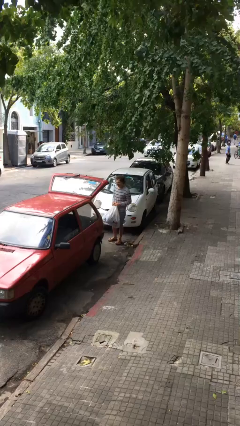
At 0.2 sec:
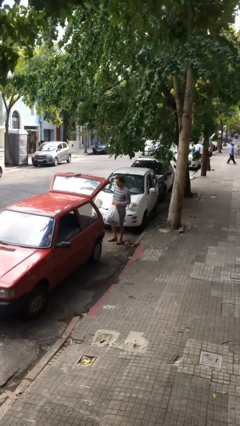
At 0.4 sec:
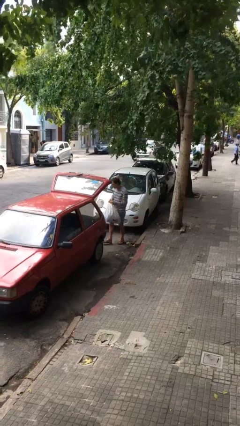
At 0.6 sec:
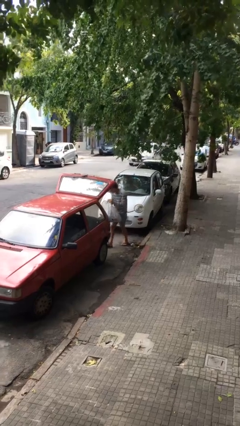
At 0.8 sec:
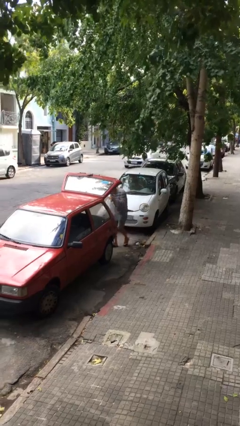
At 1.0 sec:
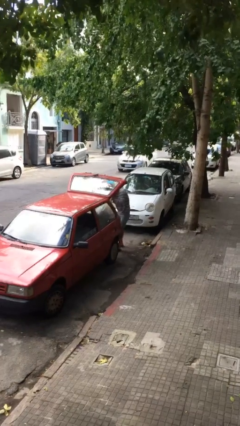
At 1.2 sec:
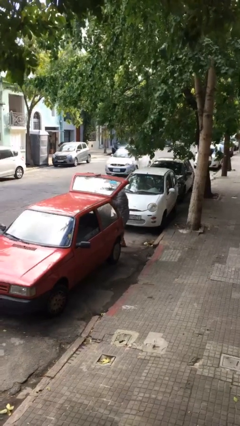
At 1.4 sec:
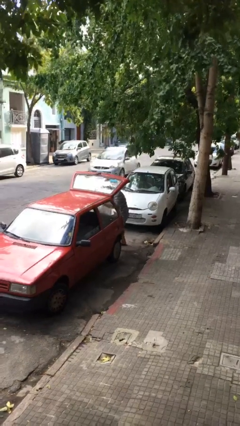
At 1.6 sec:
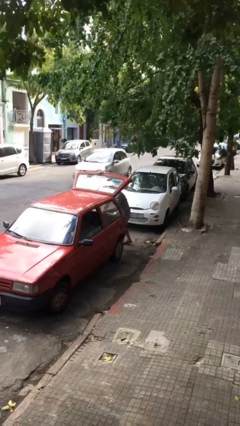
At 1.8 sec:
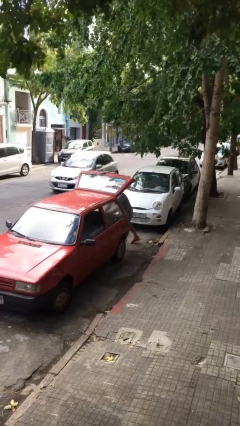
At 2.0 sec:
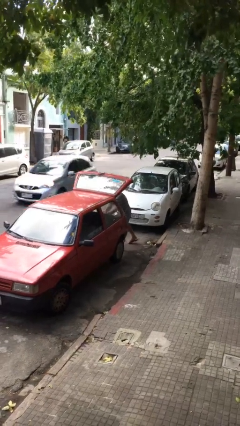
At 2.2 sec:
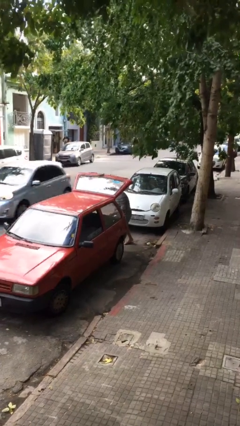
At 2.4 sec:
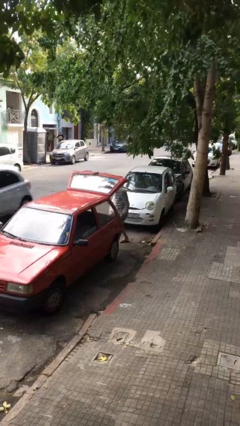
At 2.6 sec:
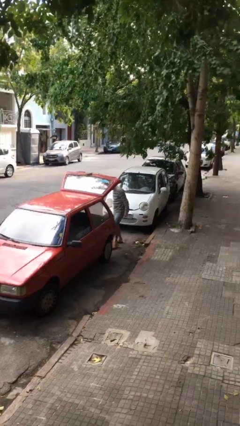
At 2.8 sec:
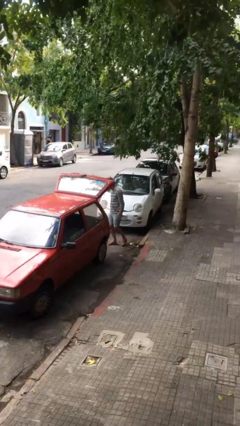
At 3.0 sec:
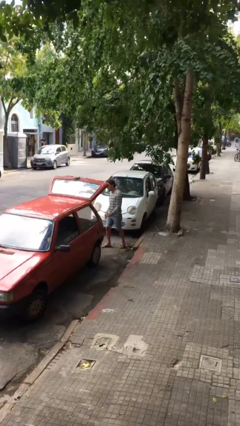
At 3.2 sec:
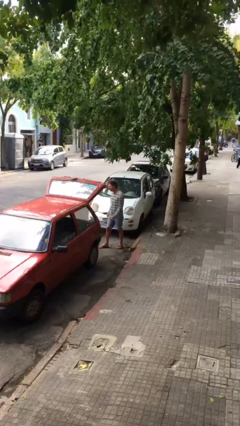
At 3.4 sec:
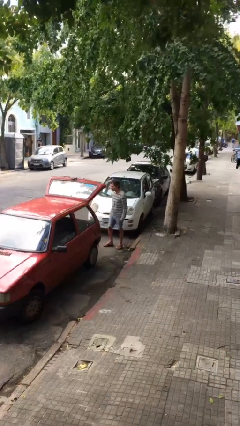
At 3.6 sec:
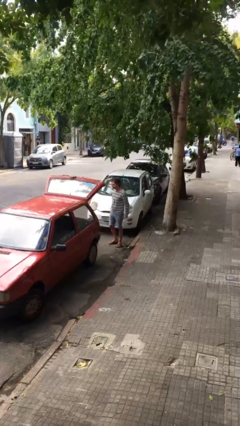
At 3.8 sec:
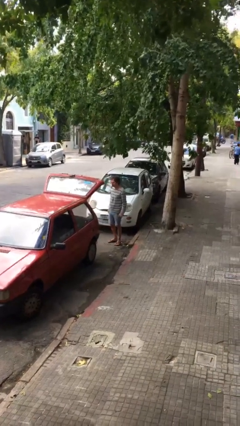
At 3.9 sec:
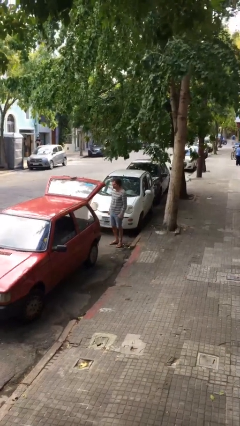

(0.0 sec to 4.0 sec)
person loads car

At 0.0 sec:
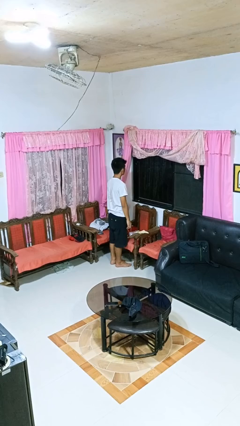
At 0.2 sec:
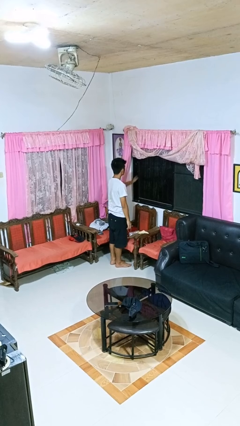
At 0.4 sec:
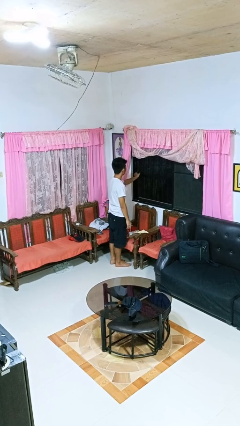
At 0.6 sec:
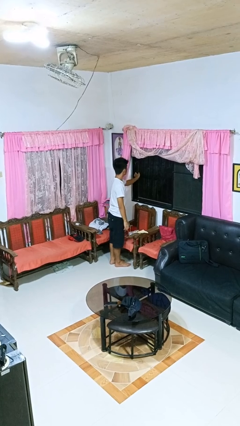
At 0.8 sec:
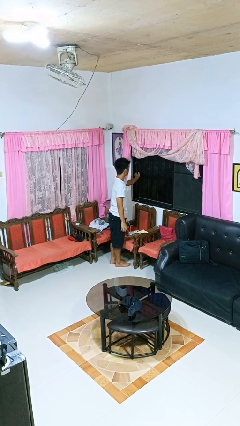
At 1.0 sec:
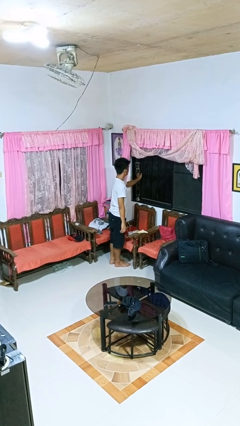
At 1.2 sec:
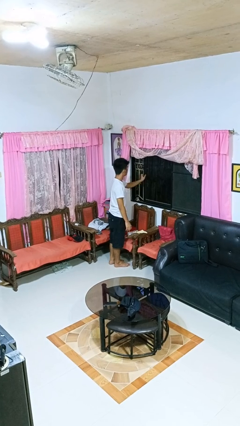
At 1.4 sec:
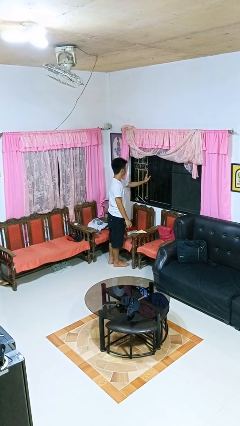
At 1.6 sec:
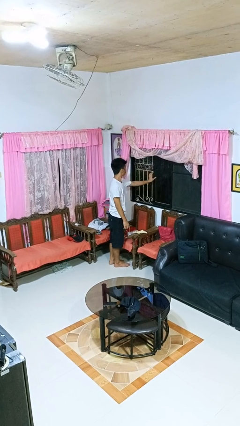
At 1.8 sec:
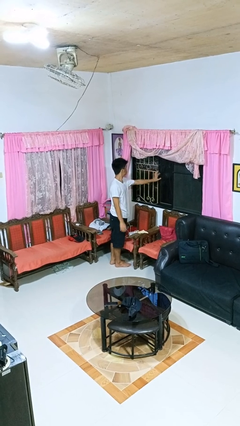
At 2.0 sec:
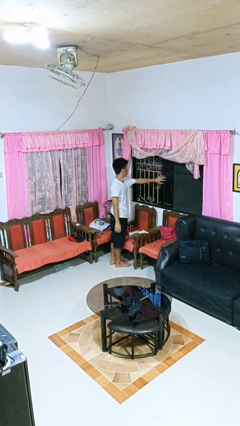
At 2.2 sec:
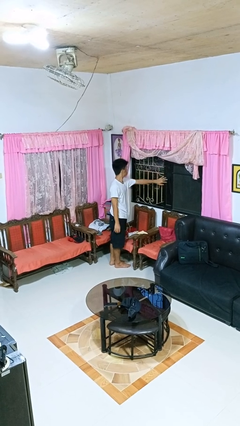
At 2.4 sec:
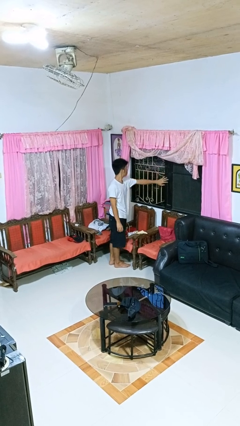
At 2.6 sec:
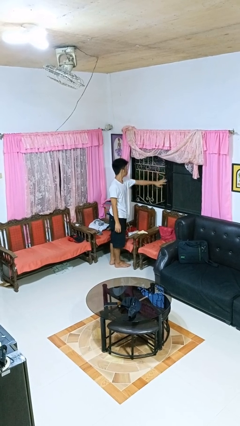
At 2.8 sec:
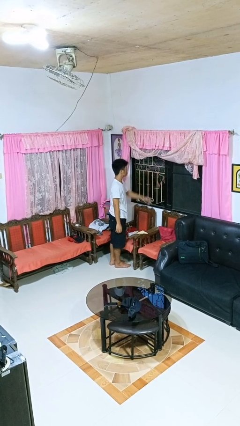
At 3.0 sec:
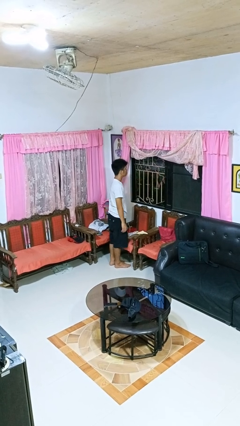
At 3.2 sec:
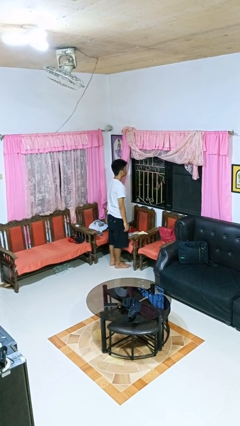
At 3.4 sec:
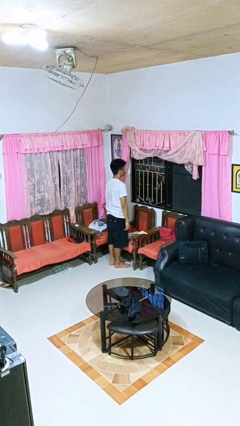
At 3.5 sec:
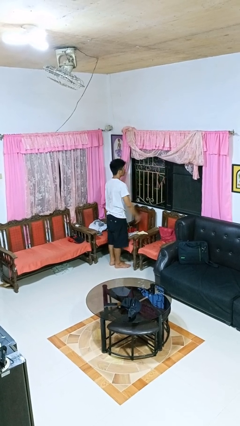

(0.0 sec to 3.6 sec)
person opens home window

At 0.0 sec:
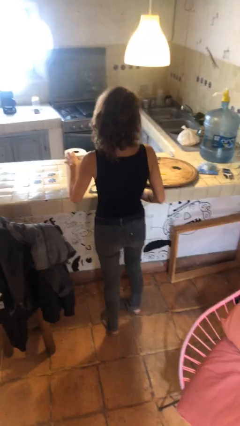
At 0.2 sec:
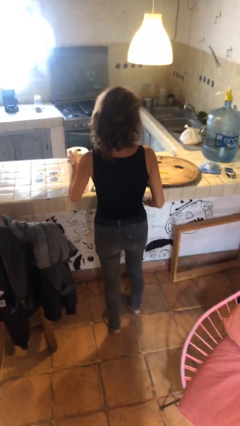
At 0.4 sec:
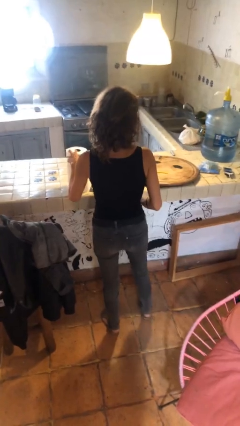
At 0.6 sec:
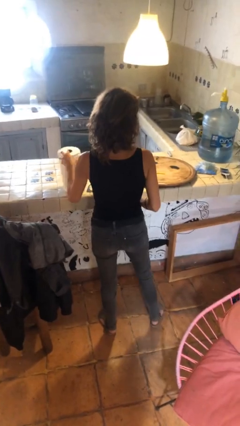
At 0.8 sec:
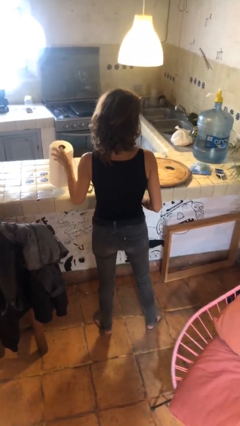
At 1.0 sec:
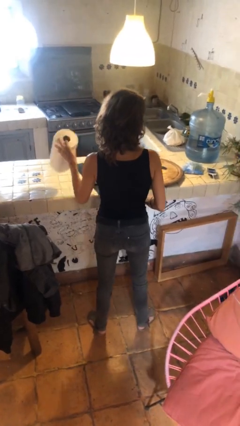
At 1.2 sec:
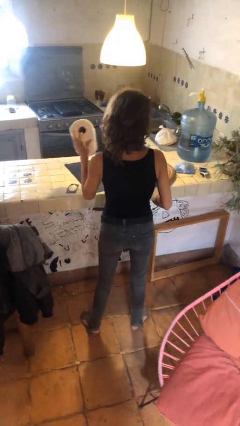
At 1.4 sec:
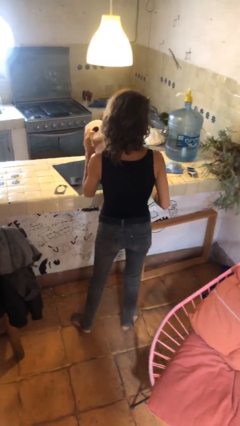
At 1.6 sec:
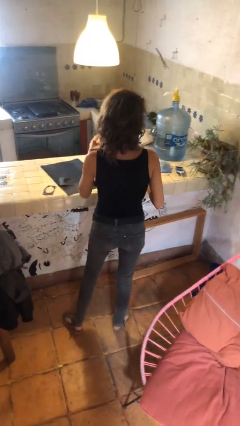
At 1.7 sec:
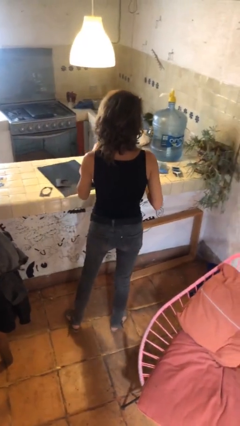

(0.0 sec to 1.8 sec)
person picks up object from countertop

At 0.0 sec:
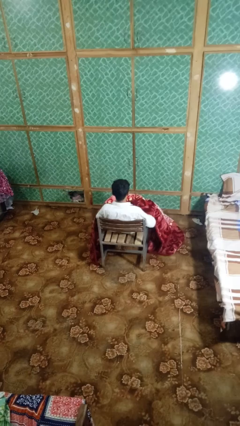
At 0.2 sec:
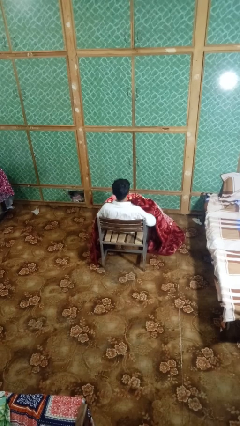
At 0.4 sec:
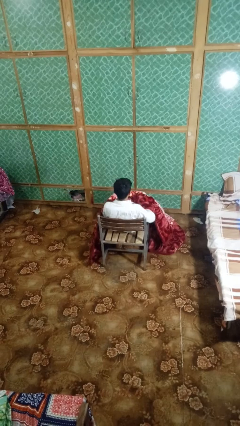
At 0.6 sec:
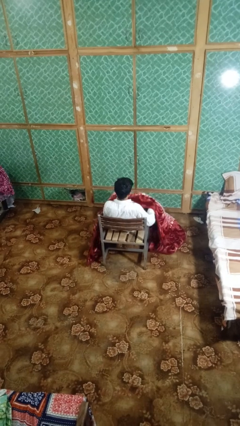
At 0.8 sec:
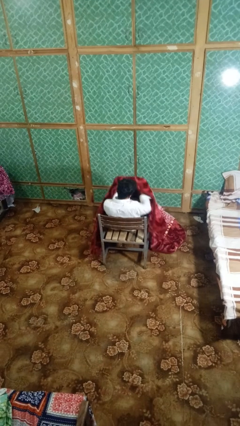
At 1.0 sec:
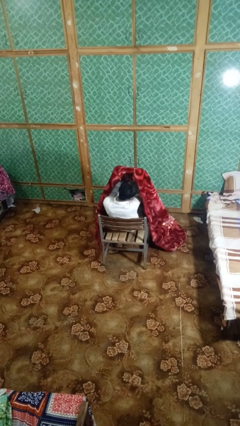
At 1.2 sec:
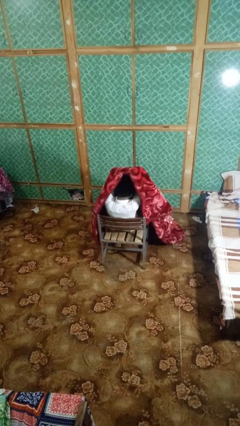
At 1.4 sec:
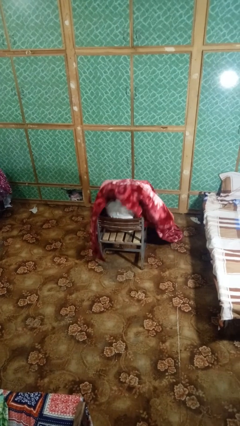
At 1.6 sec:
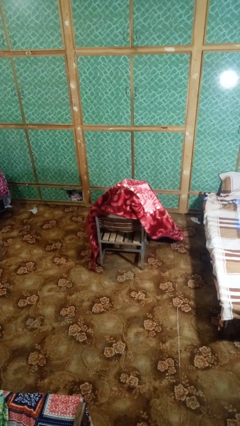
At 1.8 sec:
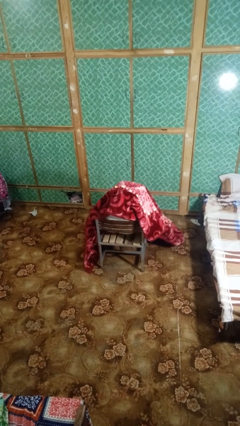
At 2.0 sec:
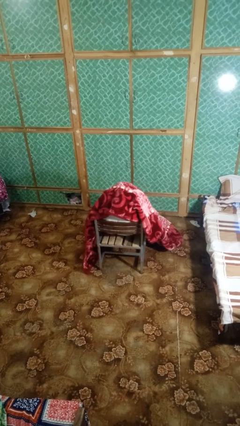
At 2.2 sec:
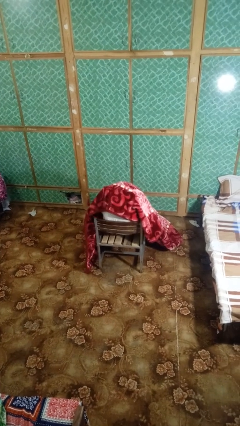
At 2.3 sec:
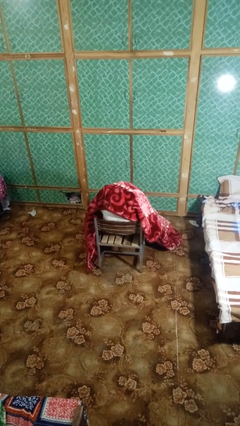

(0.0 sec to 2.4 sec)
person covers with blanket

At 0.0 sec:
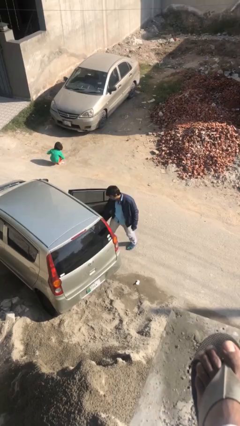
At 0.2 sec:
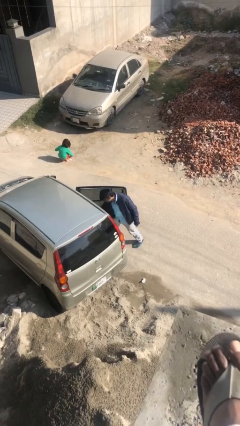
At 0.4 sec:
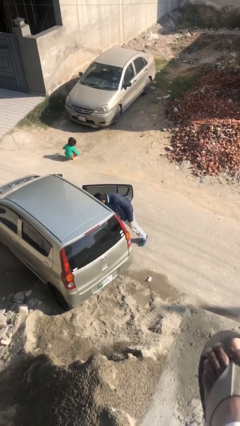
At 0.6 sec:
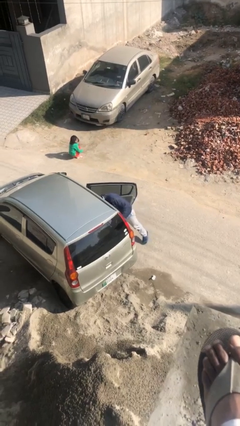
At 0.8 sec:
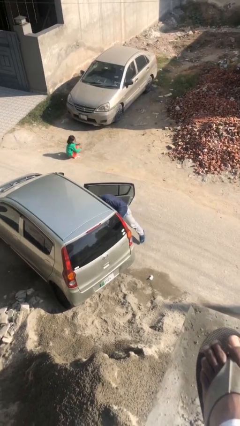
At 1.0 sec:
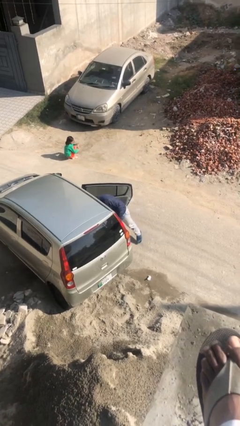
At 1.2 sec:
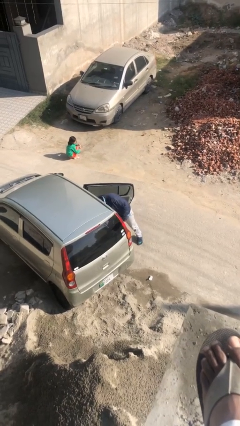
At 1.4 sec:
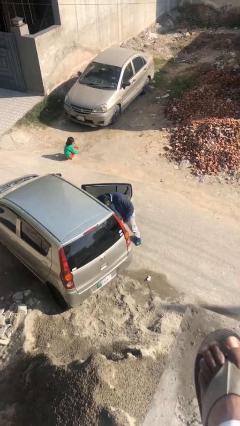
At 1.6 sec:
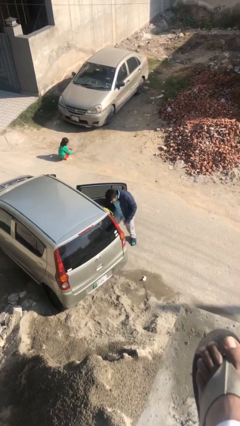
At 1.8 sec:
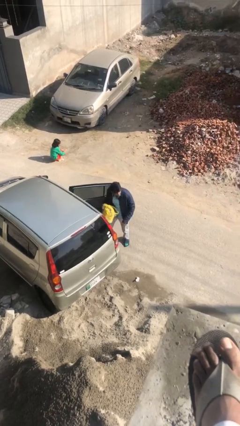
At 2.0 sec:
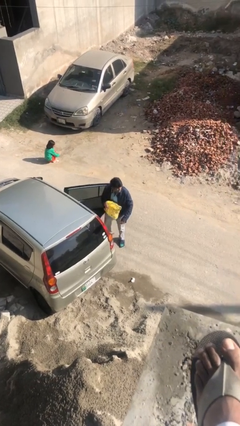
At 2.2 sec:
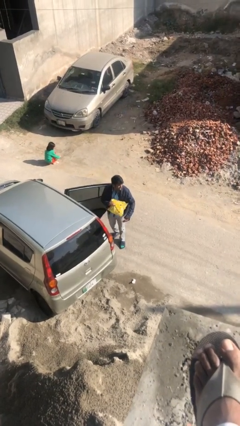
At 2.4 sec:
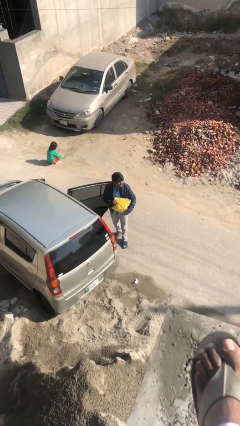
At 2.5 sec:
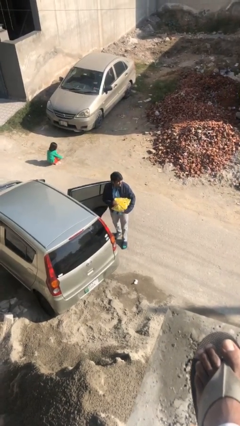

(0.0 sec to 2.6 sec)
person unloads car

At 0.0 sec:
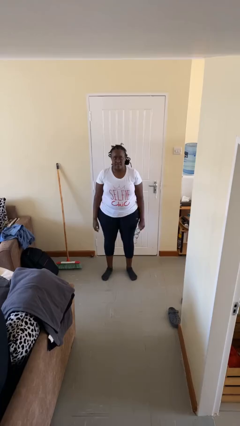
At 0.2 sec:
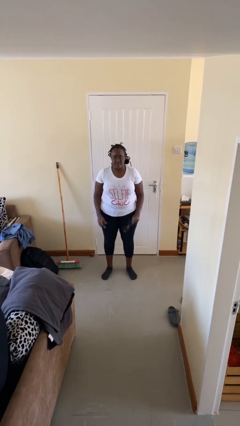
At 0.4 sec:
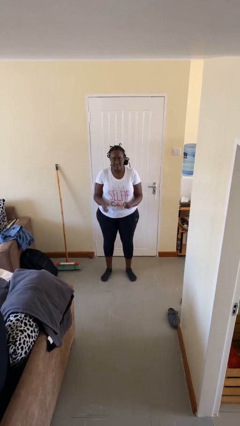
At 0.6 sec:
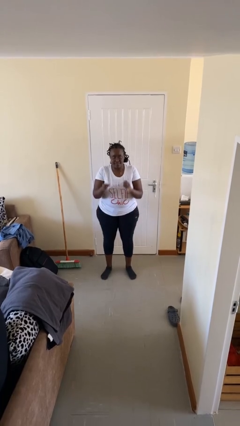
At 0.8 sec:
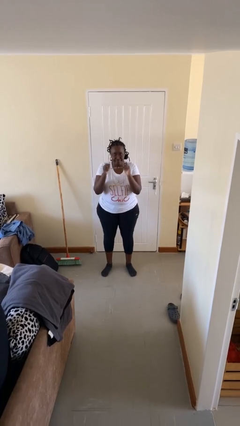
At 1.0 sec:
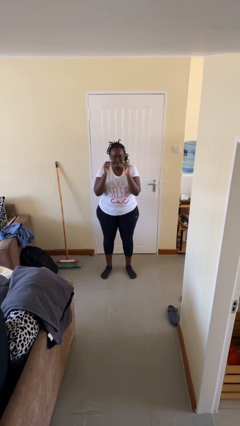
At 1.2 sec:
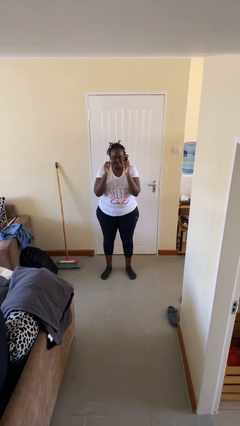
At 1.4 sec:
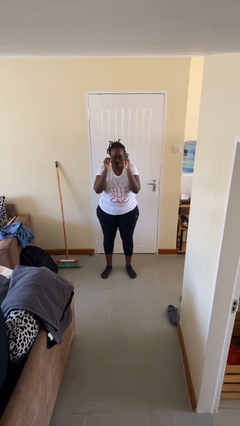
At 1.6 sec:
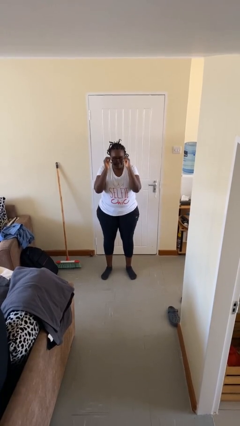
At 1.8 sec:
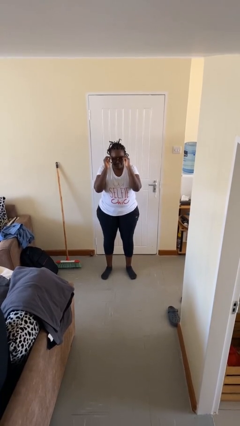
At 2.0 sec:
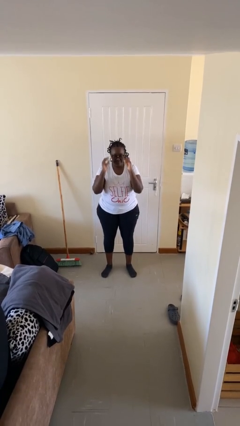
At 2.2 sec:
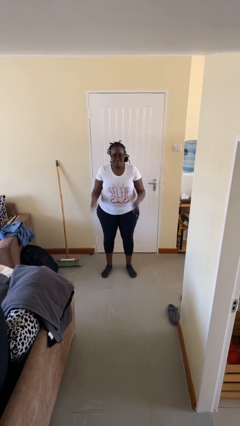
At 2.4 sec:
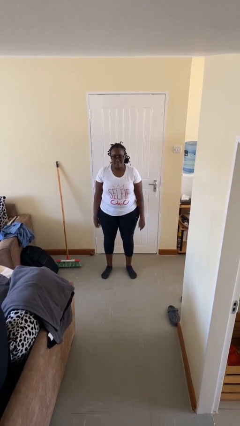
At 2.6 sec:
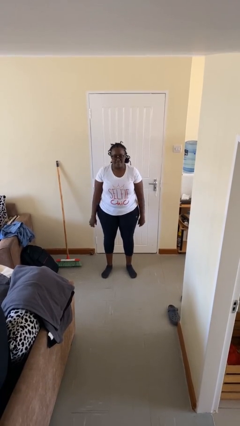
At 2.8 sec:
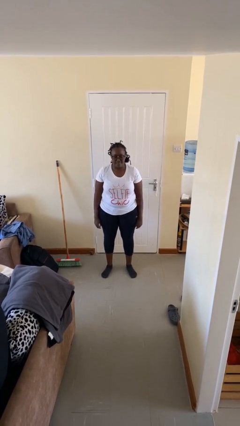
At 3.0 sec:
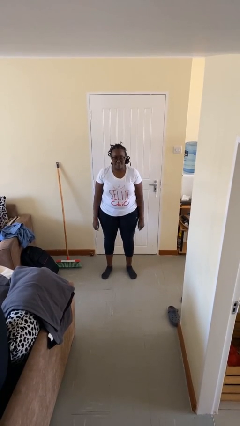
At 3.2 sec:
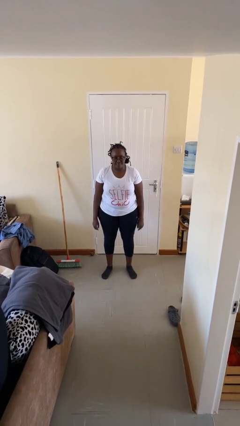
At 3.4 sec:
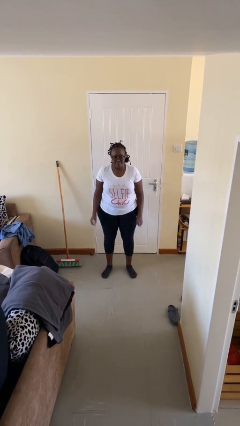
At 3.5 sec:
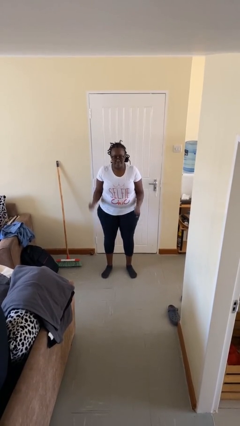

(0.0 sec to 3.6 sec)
person puts on glasses
